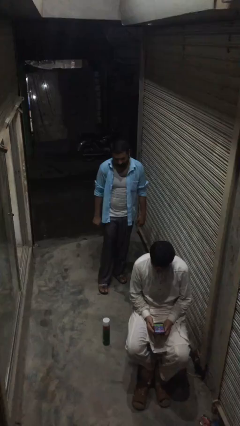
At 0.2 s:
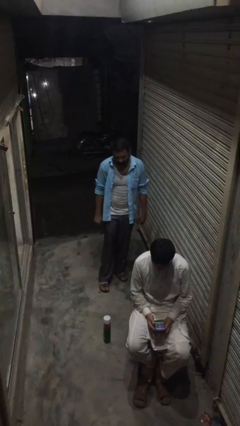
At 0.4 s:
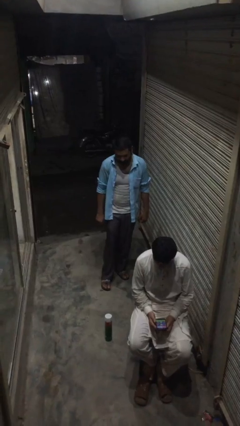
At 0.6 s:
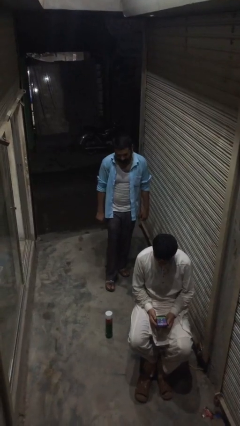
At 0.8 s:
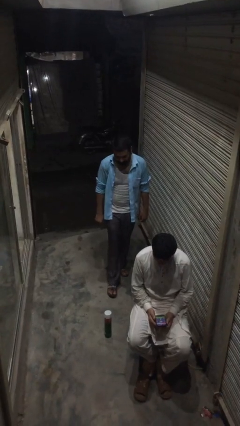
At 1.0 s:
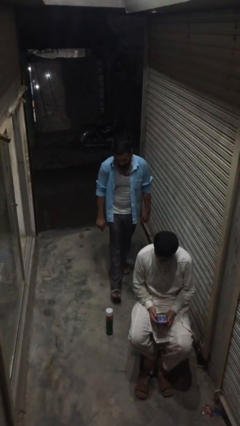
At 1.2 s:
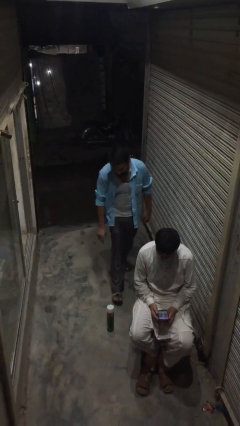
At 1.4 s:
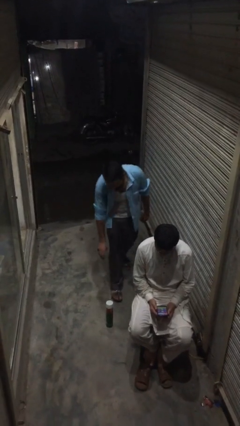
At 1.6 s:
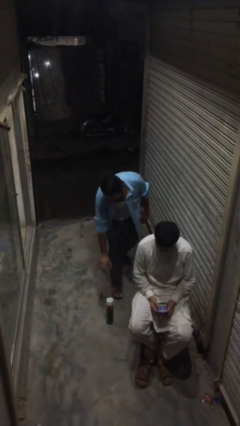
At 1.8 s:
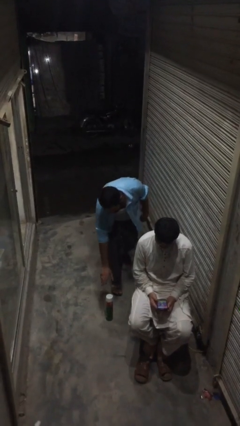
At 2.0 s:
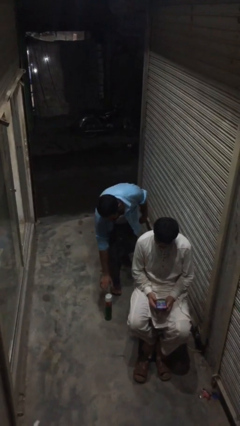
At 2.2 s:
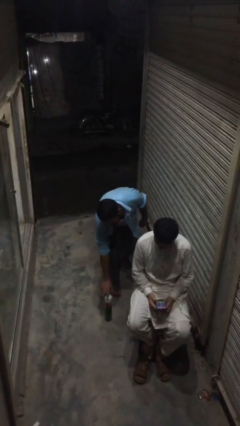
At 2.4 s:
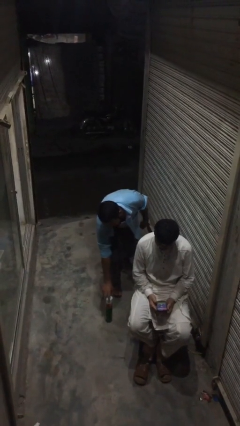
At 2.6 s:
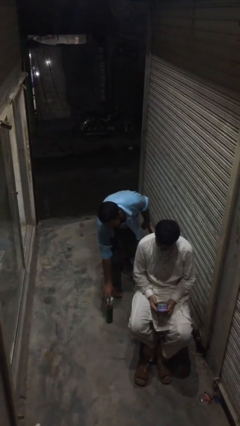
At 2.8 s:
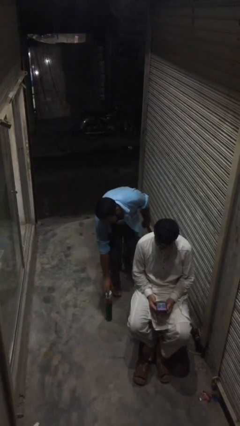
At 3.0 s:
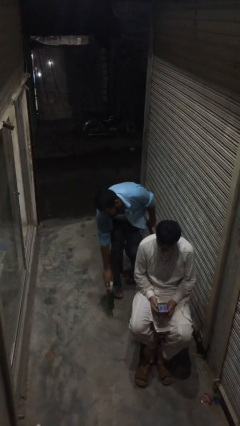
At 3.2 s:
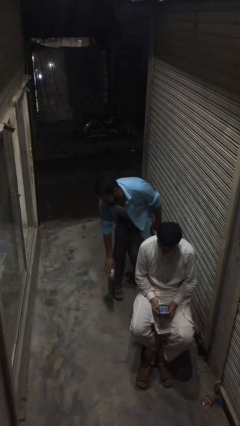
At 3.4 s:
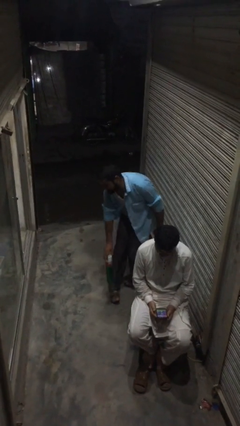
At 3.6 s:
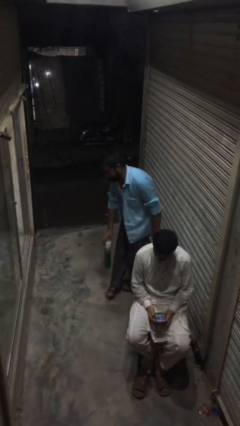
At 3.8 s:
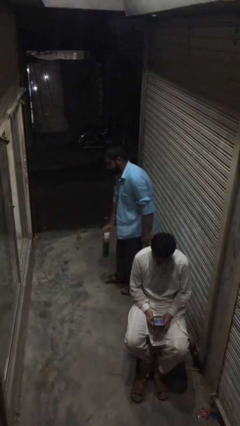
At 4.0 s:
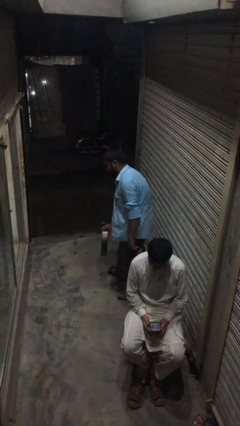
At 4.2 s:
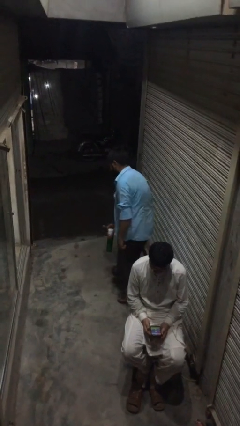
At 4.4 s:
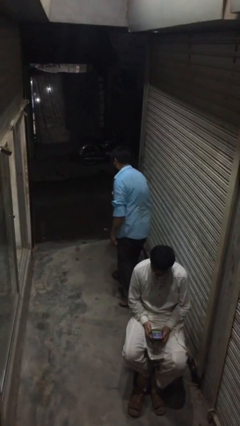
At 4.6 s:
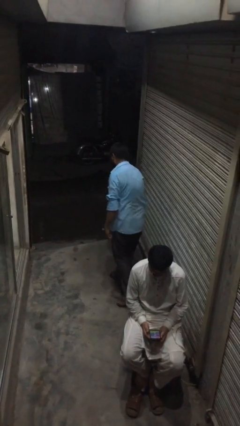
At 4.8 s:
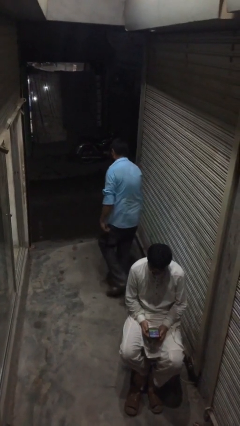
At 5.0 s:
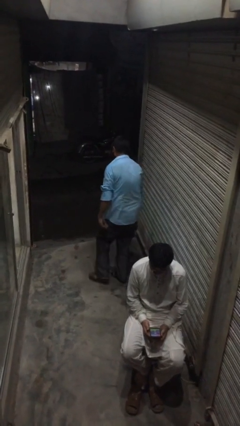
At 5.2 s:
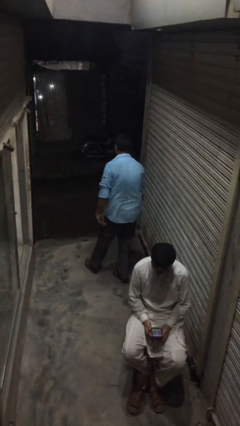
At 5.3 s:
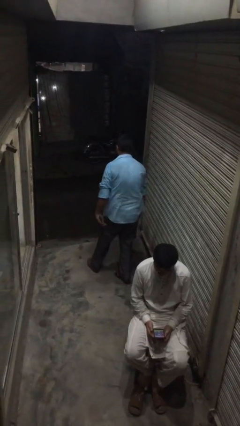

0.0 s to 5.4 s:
person steals object from person

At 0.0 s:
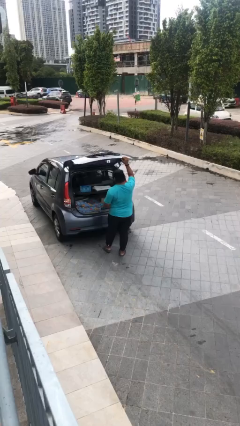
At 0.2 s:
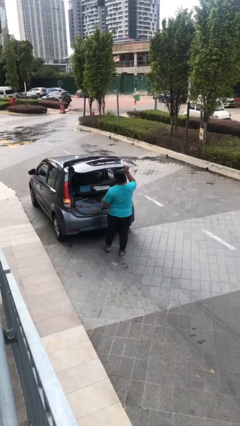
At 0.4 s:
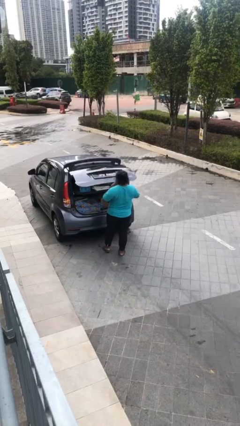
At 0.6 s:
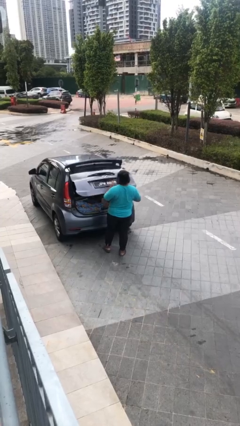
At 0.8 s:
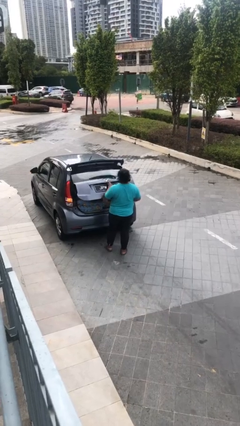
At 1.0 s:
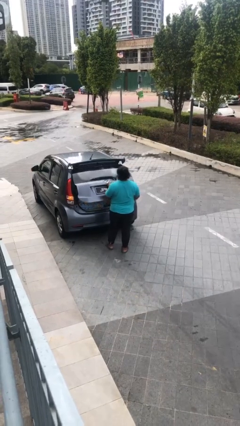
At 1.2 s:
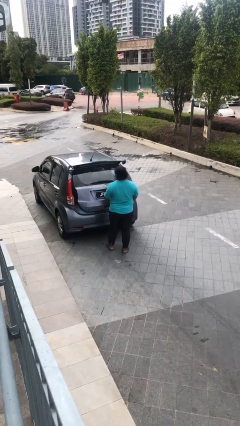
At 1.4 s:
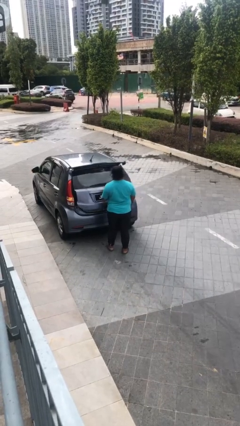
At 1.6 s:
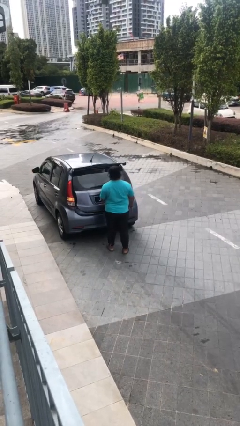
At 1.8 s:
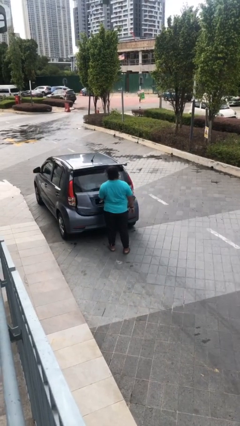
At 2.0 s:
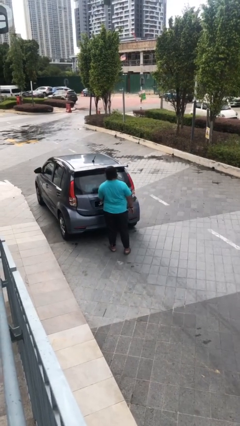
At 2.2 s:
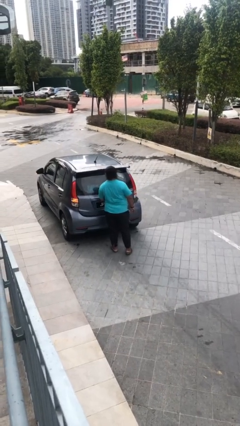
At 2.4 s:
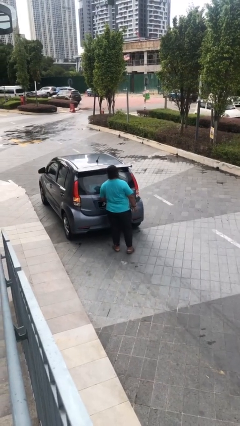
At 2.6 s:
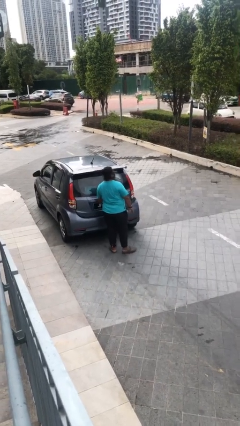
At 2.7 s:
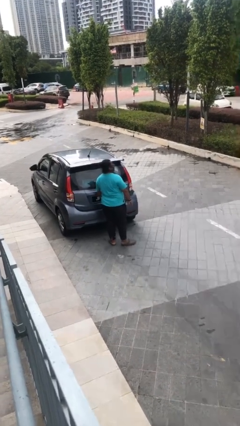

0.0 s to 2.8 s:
person closes car trunk

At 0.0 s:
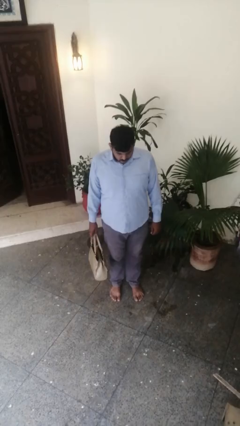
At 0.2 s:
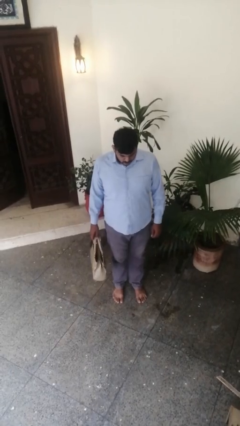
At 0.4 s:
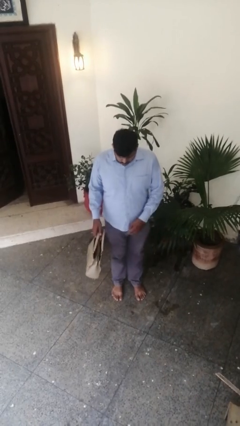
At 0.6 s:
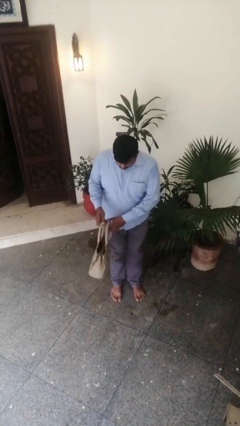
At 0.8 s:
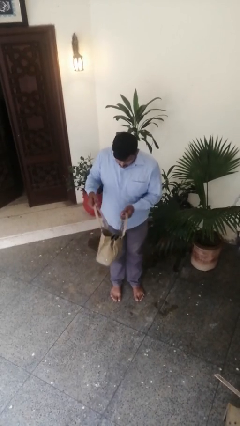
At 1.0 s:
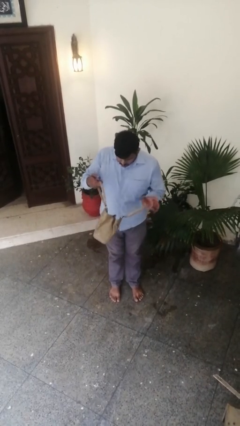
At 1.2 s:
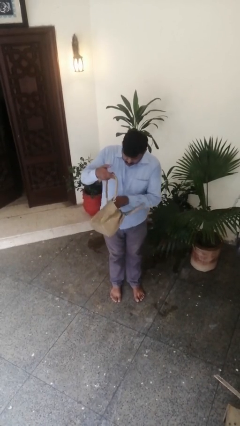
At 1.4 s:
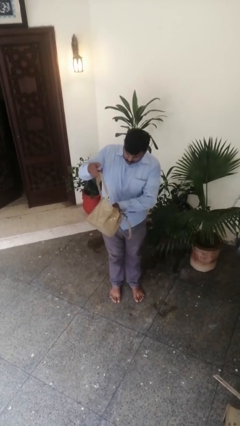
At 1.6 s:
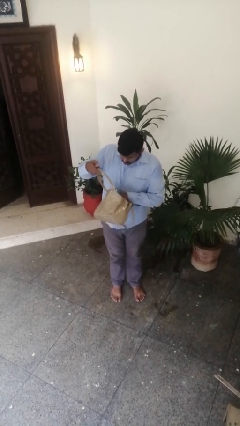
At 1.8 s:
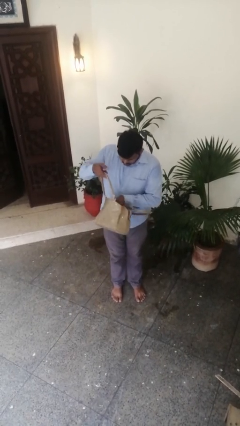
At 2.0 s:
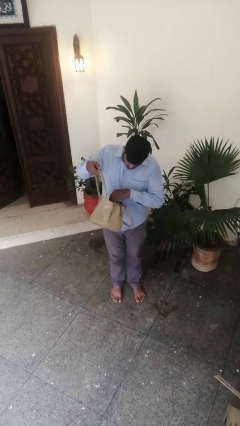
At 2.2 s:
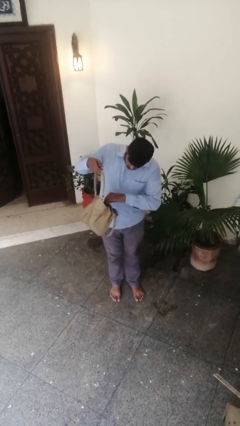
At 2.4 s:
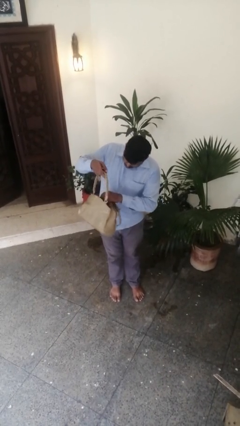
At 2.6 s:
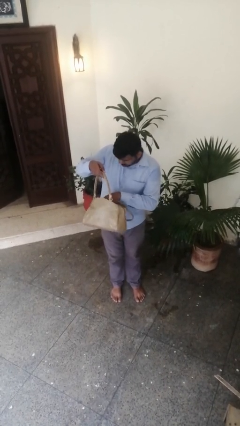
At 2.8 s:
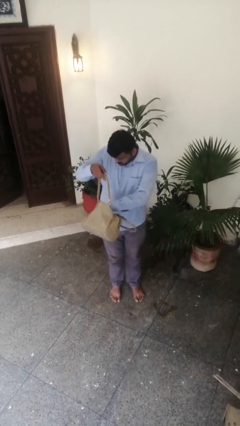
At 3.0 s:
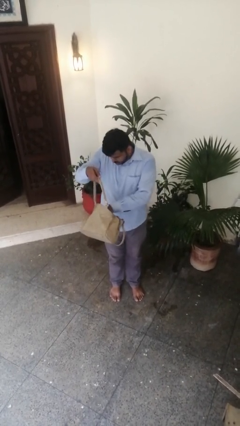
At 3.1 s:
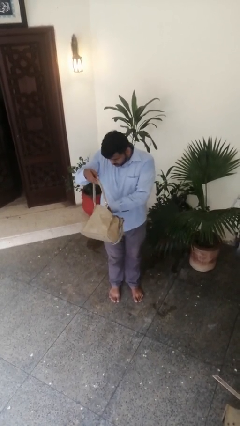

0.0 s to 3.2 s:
person searches in purse

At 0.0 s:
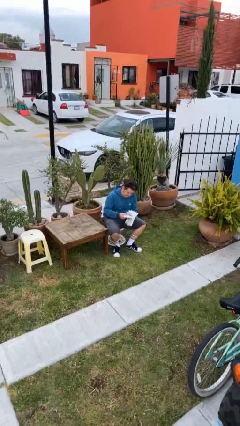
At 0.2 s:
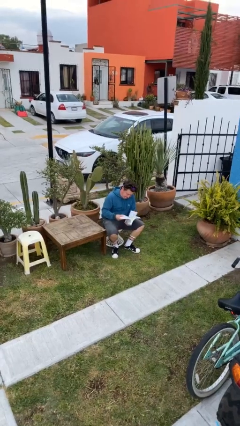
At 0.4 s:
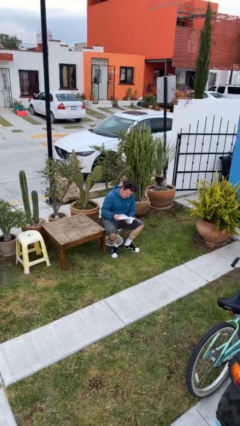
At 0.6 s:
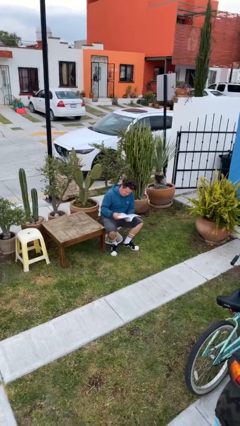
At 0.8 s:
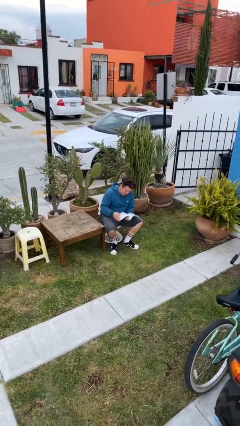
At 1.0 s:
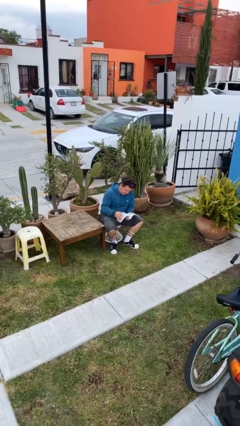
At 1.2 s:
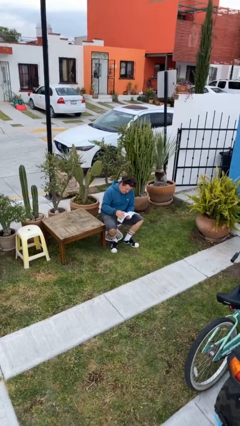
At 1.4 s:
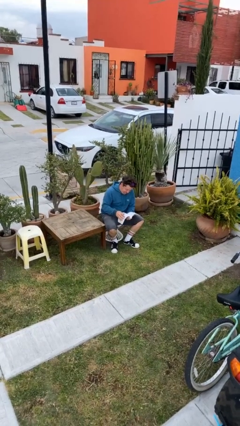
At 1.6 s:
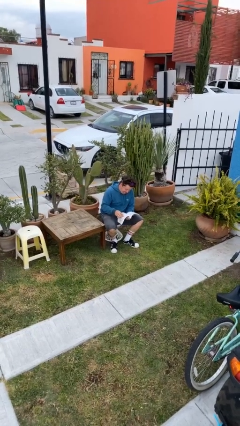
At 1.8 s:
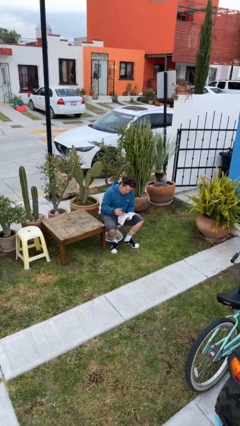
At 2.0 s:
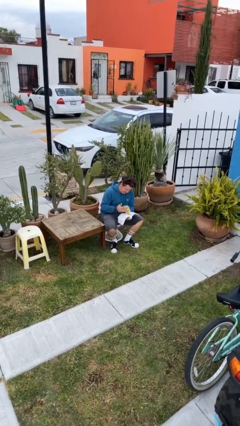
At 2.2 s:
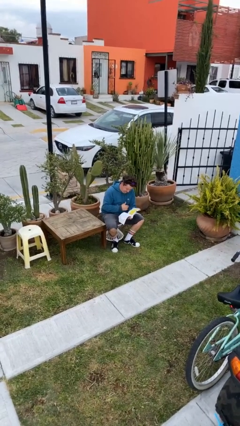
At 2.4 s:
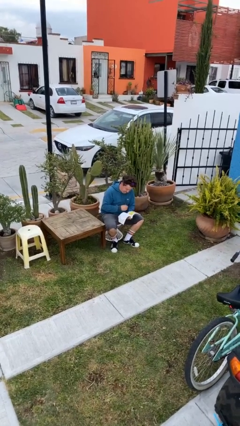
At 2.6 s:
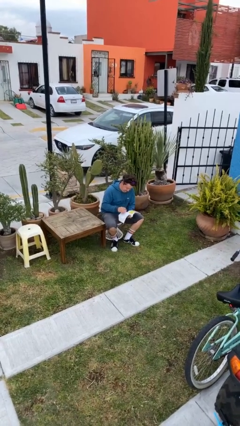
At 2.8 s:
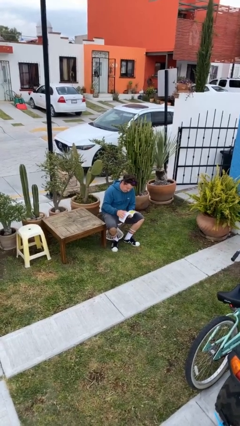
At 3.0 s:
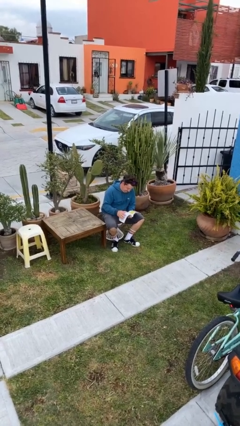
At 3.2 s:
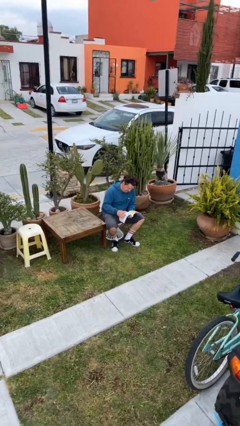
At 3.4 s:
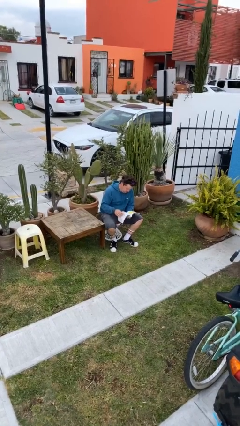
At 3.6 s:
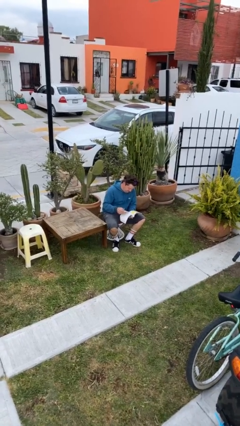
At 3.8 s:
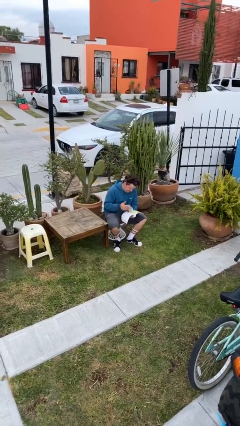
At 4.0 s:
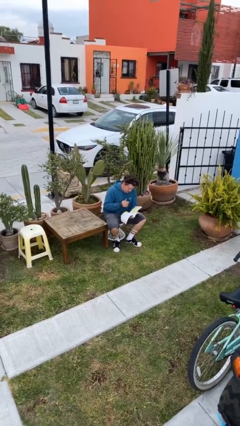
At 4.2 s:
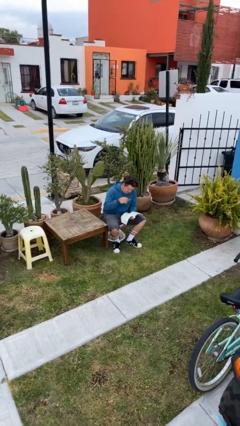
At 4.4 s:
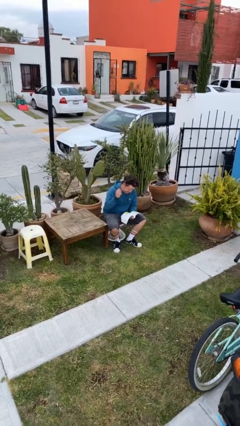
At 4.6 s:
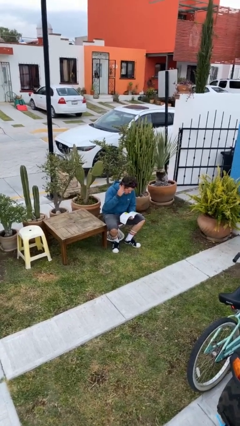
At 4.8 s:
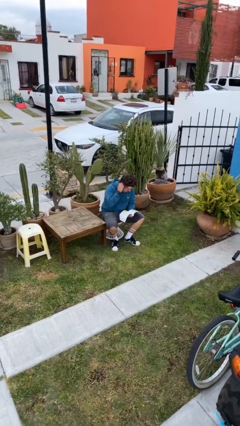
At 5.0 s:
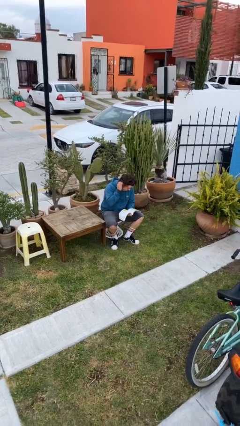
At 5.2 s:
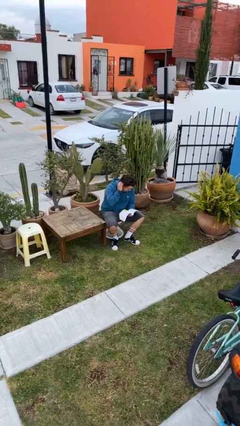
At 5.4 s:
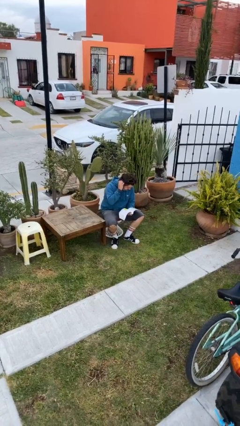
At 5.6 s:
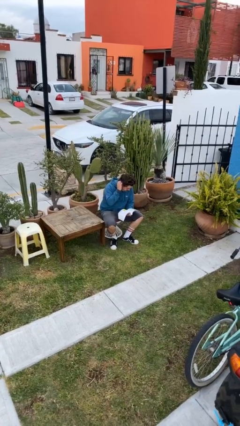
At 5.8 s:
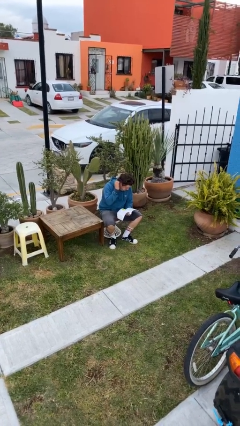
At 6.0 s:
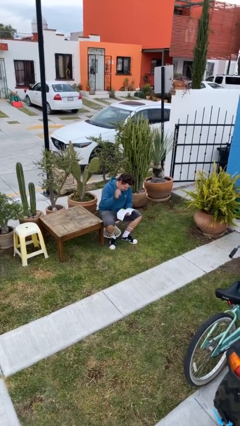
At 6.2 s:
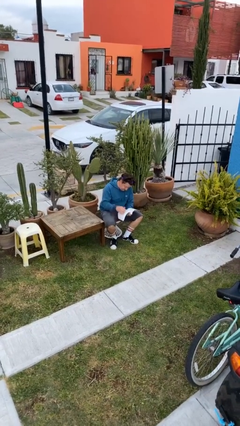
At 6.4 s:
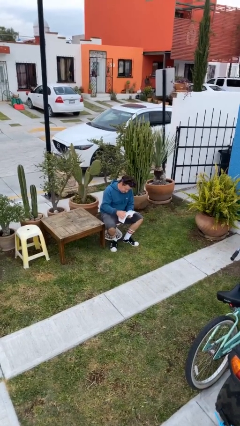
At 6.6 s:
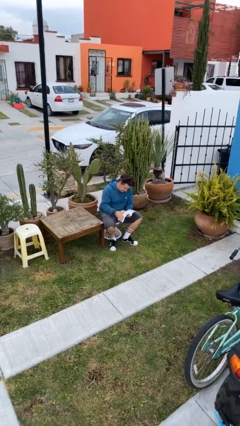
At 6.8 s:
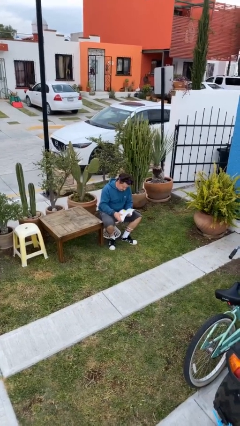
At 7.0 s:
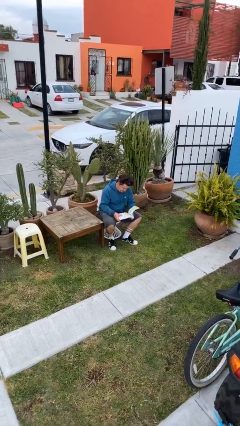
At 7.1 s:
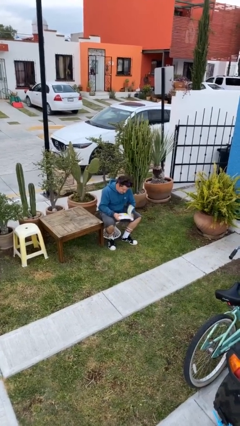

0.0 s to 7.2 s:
person reads document
